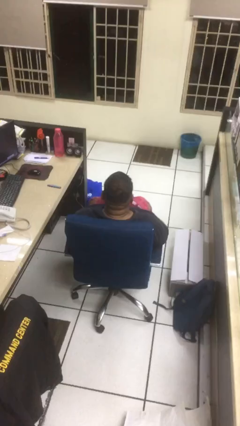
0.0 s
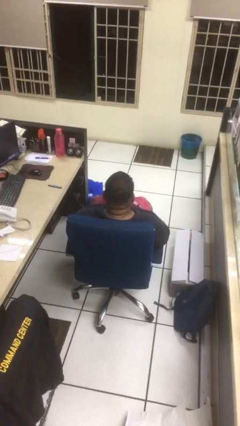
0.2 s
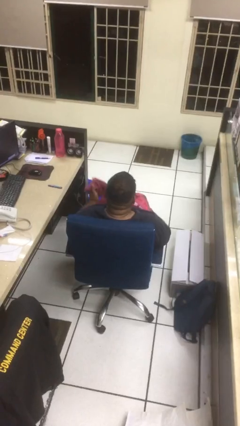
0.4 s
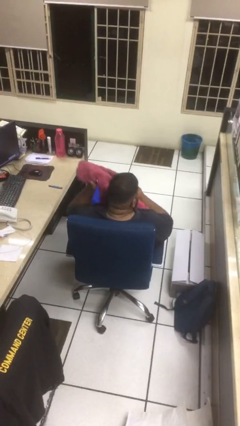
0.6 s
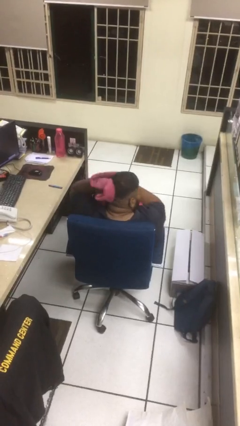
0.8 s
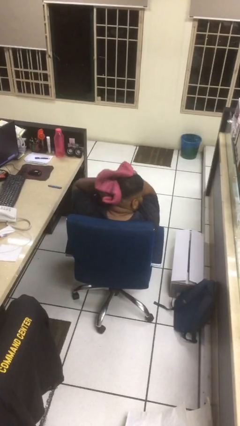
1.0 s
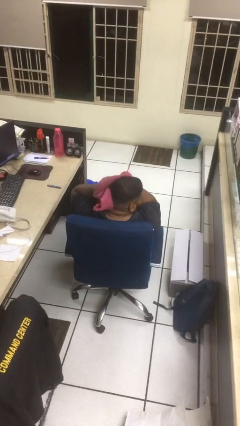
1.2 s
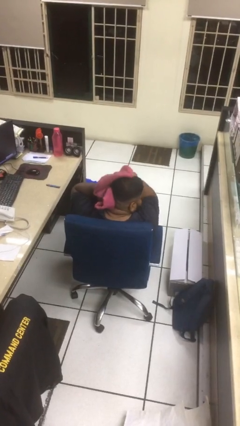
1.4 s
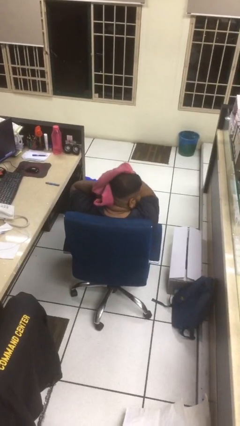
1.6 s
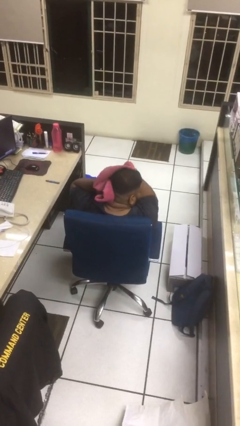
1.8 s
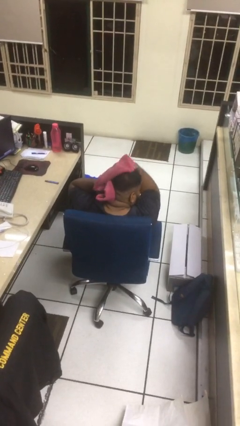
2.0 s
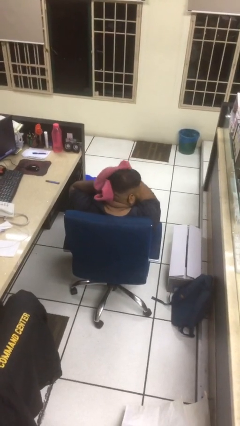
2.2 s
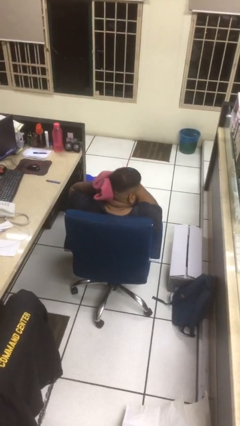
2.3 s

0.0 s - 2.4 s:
person dries hair with towel

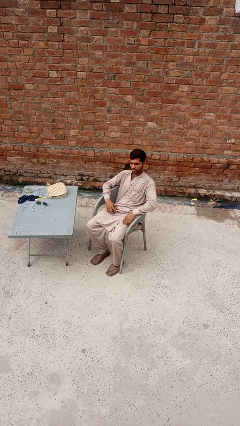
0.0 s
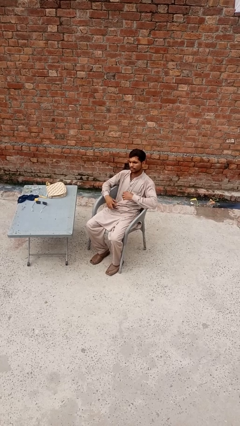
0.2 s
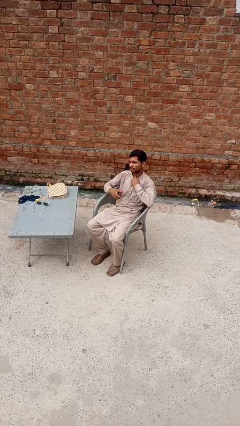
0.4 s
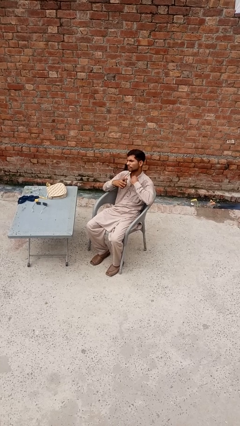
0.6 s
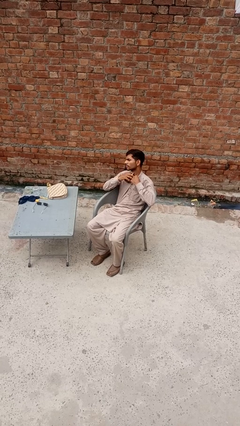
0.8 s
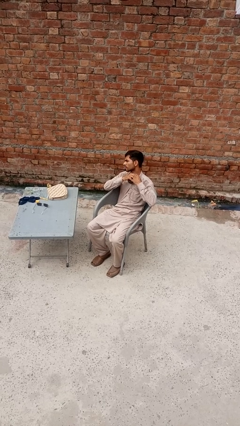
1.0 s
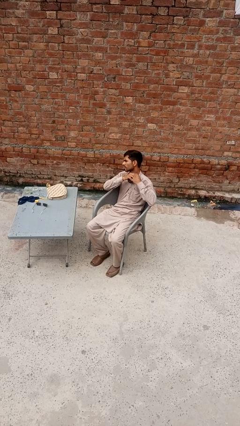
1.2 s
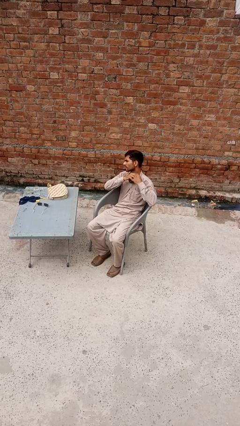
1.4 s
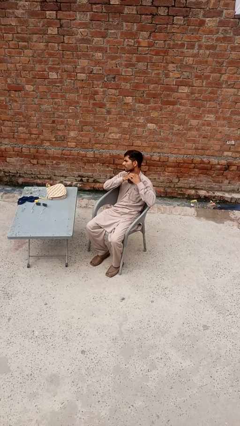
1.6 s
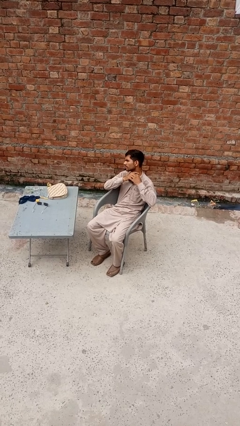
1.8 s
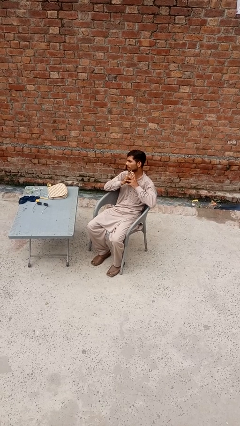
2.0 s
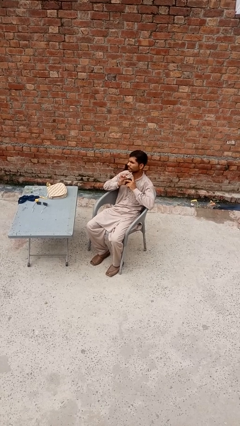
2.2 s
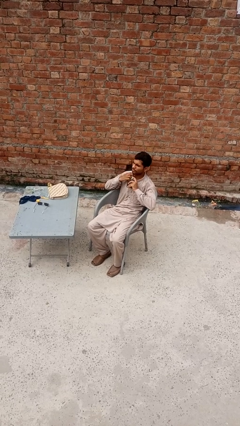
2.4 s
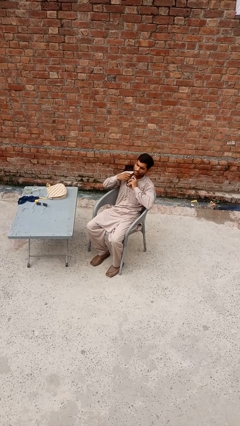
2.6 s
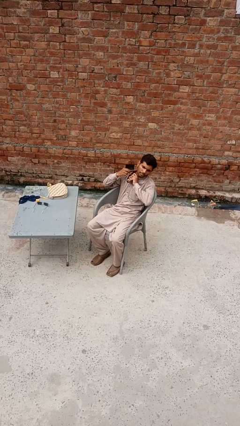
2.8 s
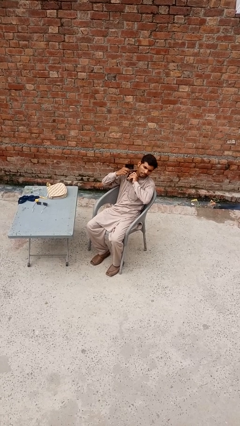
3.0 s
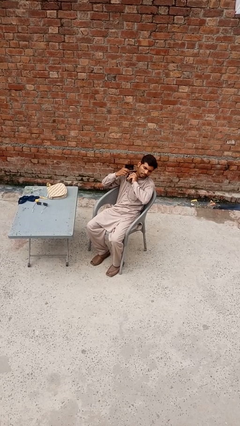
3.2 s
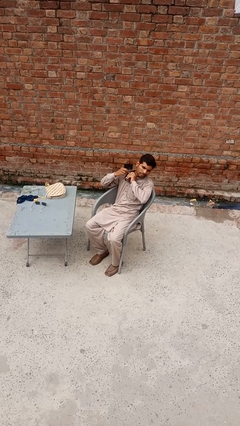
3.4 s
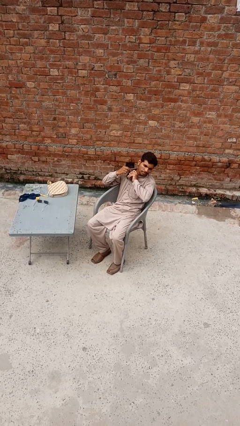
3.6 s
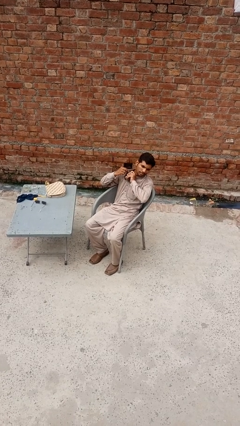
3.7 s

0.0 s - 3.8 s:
person applies deodorant

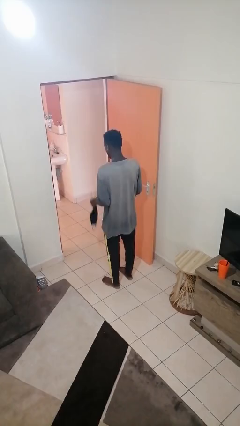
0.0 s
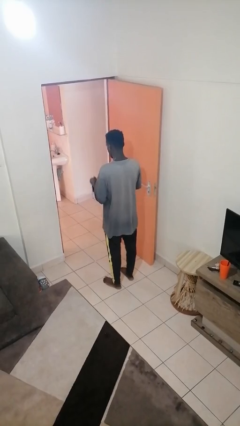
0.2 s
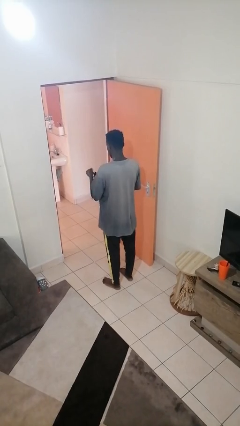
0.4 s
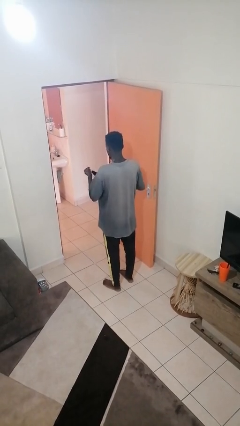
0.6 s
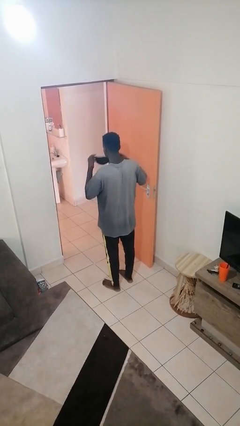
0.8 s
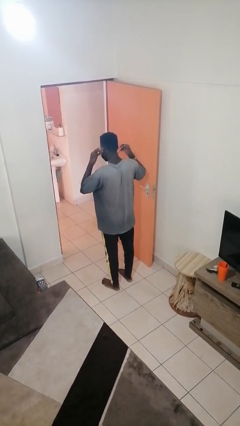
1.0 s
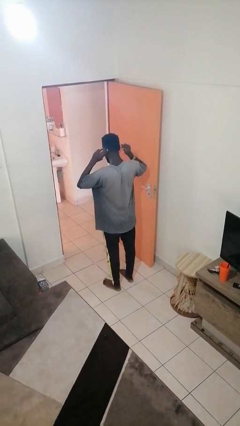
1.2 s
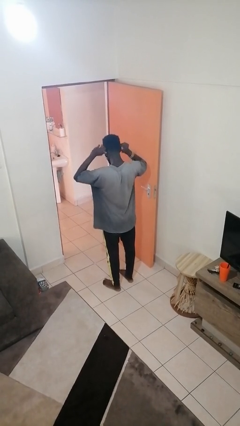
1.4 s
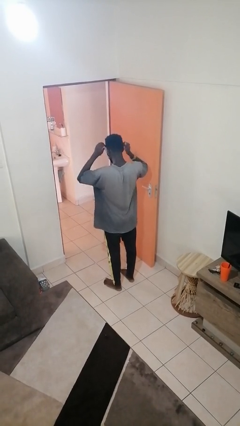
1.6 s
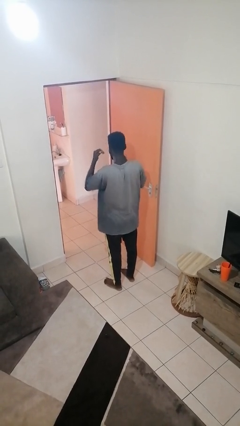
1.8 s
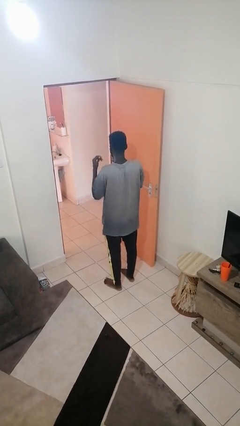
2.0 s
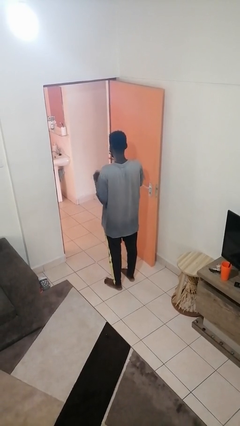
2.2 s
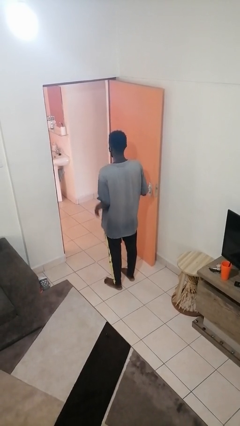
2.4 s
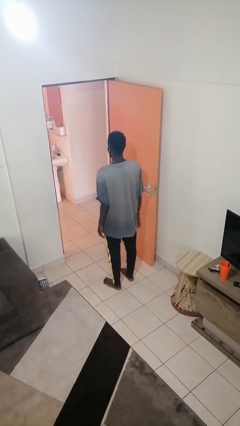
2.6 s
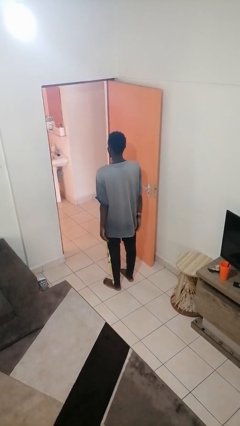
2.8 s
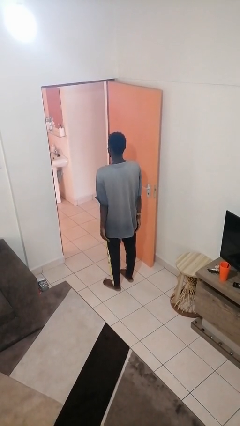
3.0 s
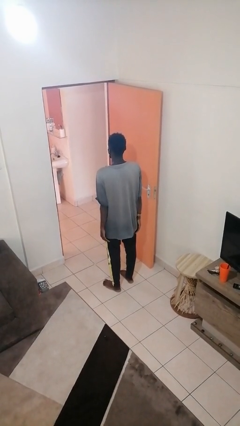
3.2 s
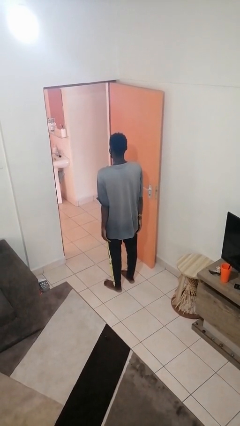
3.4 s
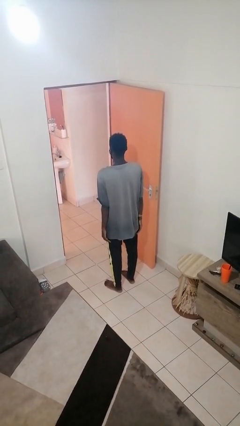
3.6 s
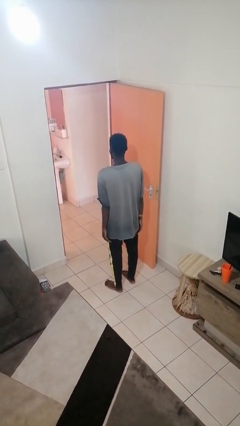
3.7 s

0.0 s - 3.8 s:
person puts on facemask

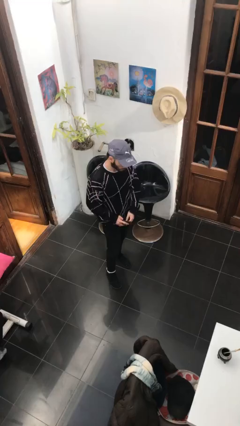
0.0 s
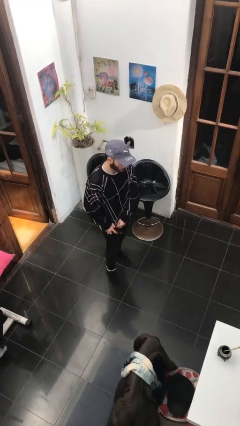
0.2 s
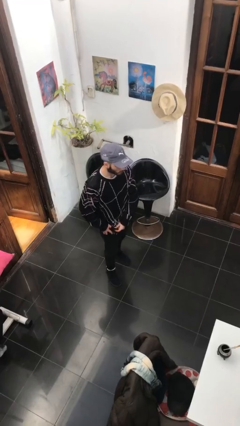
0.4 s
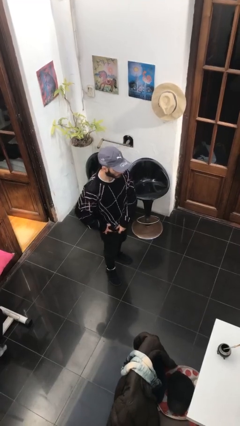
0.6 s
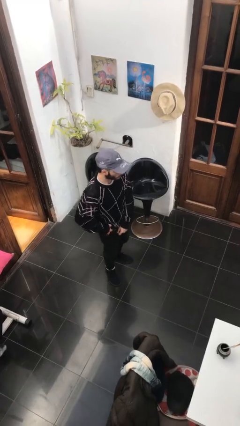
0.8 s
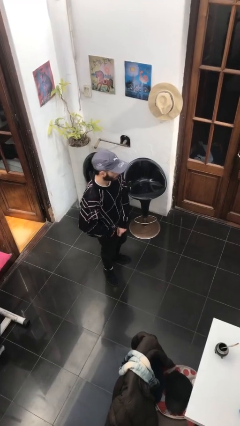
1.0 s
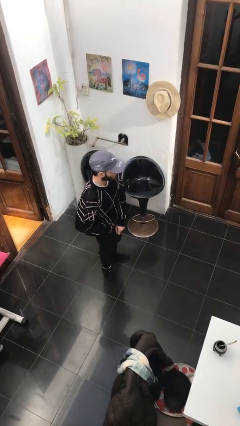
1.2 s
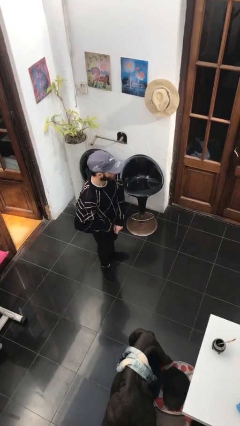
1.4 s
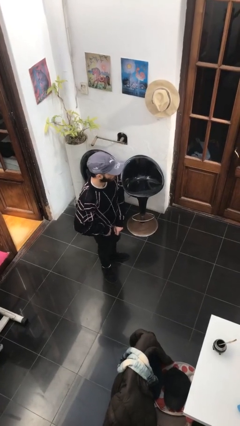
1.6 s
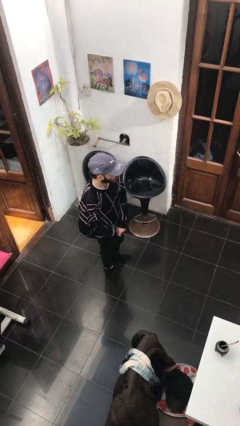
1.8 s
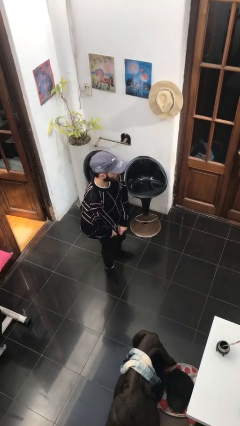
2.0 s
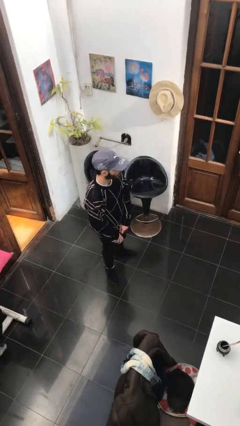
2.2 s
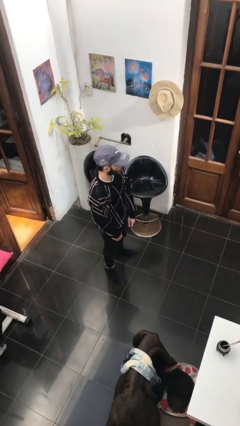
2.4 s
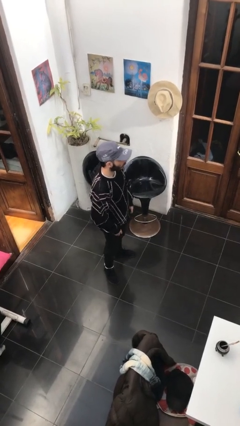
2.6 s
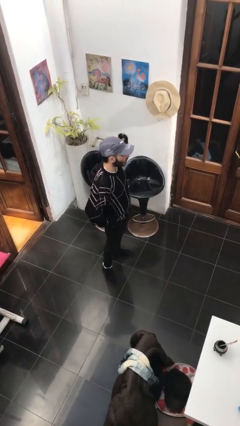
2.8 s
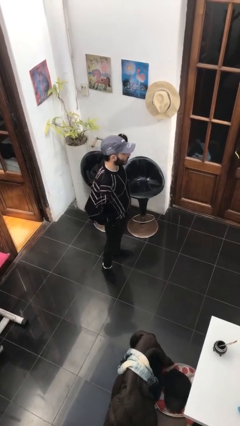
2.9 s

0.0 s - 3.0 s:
person puts phone into pocket

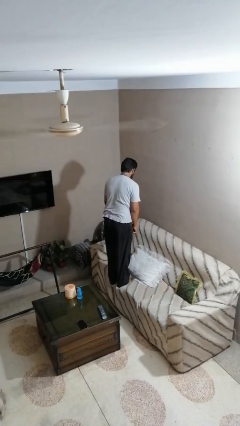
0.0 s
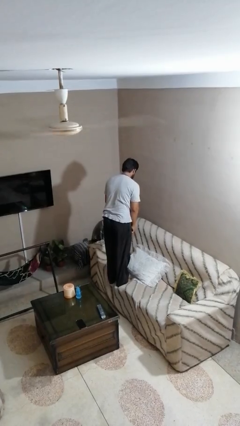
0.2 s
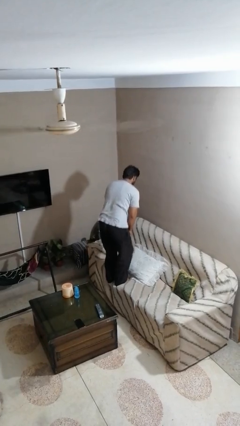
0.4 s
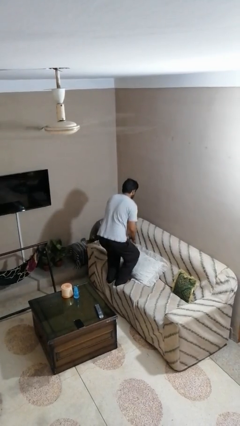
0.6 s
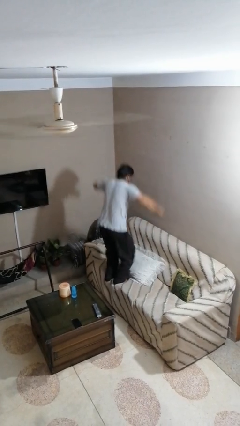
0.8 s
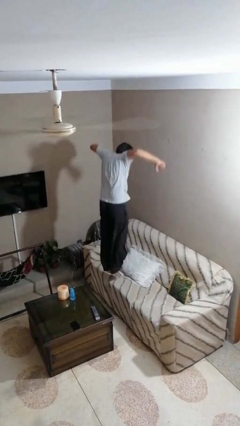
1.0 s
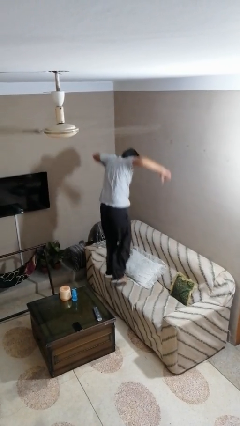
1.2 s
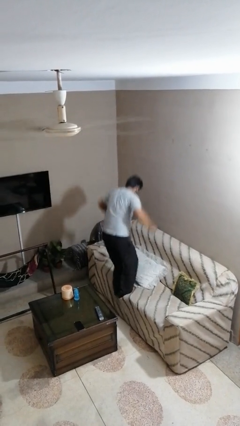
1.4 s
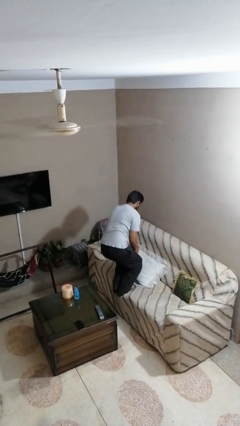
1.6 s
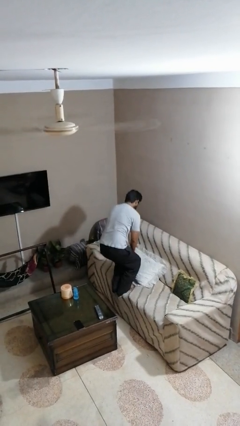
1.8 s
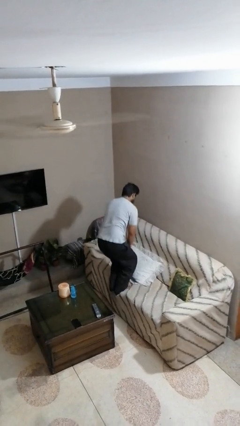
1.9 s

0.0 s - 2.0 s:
person jumps on couch

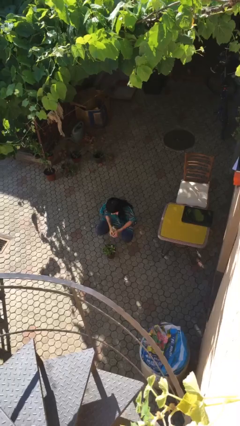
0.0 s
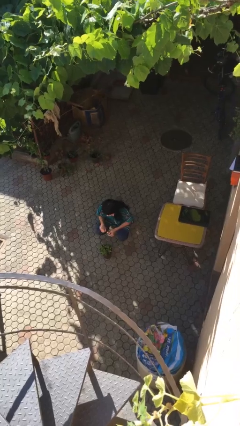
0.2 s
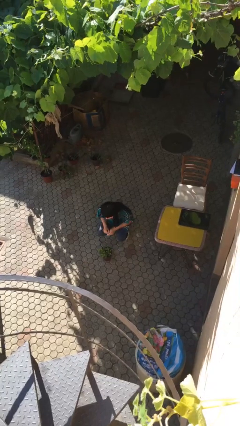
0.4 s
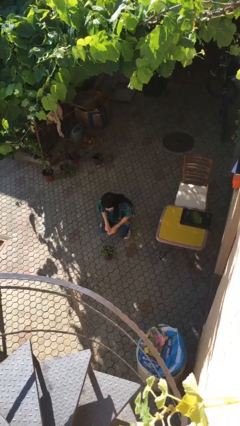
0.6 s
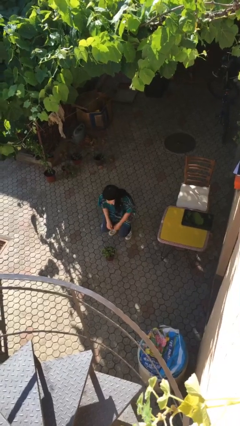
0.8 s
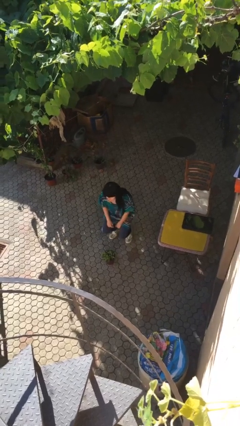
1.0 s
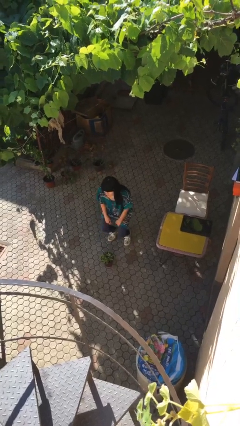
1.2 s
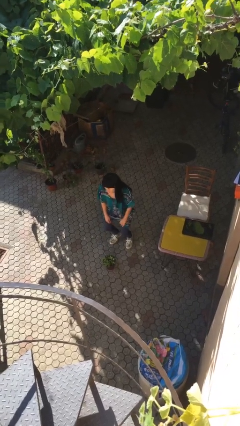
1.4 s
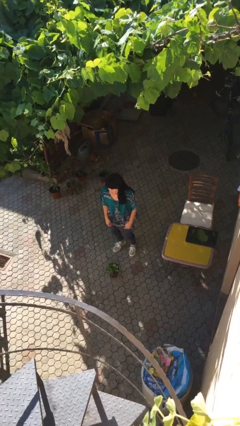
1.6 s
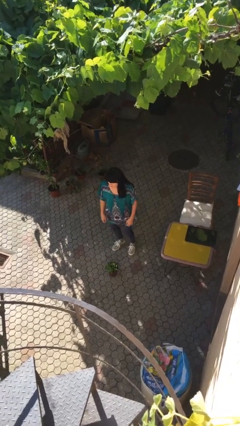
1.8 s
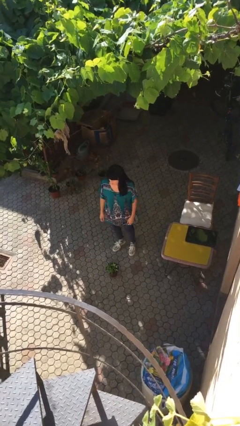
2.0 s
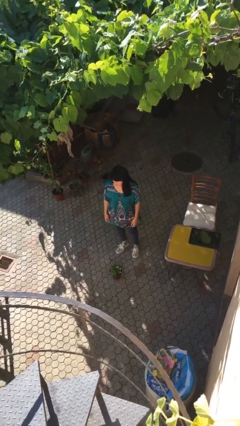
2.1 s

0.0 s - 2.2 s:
person puts down object on floor

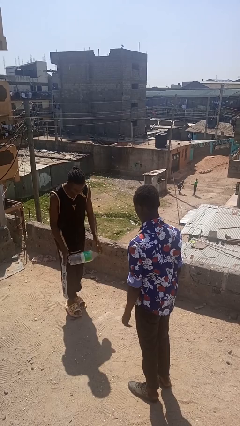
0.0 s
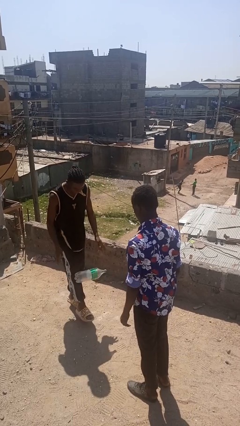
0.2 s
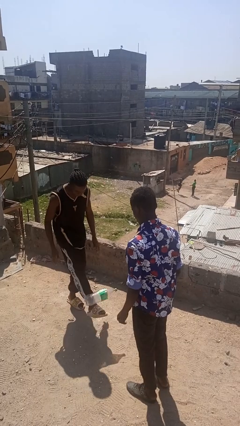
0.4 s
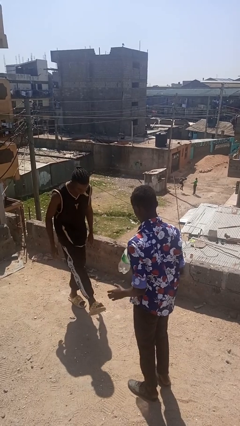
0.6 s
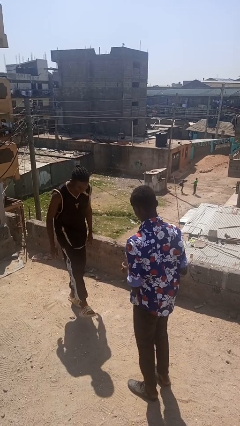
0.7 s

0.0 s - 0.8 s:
person kicks object to person
